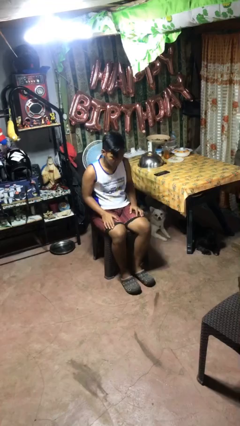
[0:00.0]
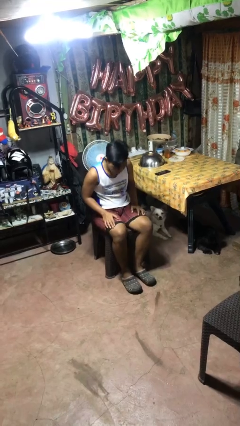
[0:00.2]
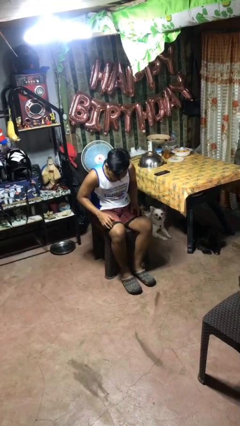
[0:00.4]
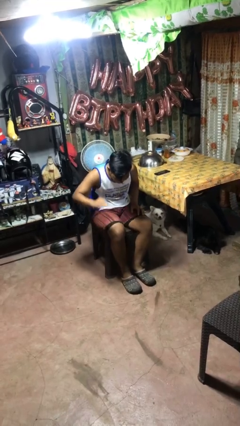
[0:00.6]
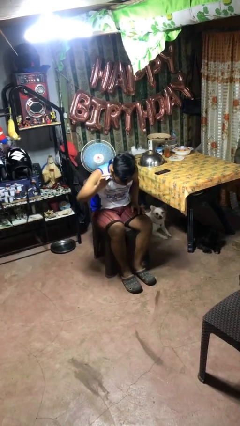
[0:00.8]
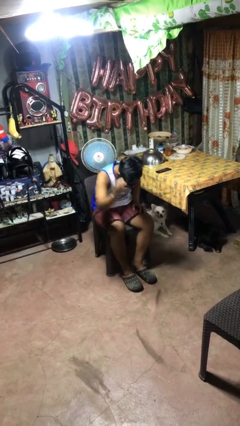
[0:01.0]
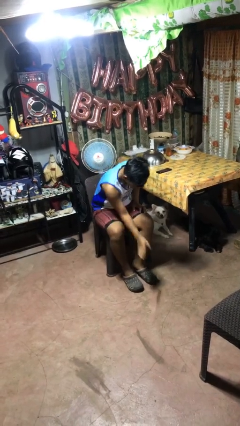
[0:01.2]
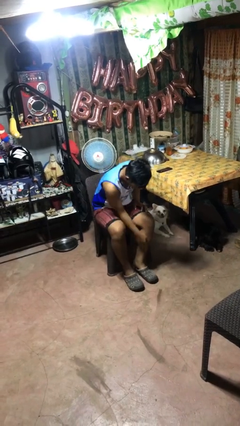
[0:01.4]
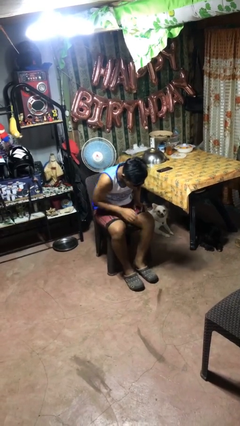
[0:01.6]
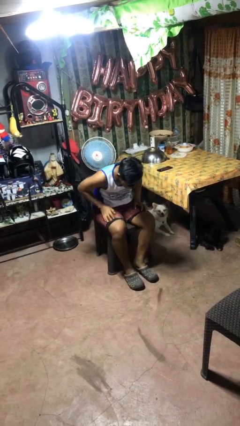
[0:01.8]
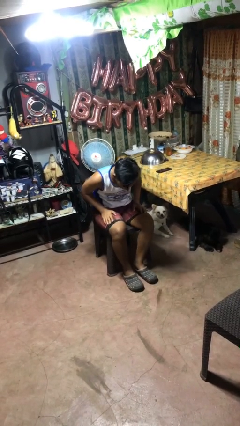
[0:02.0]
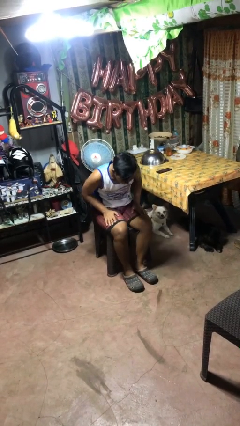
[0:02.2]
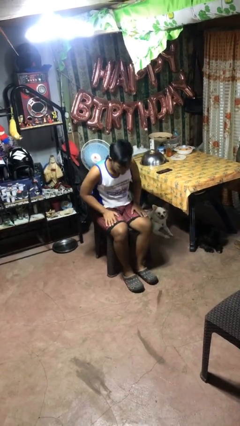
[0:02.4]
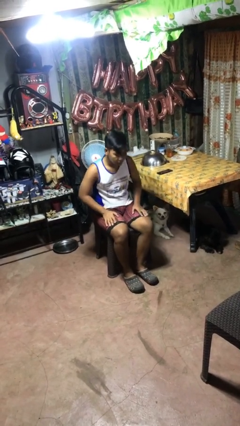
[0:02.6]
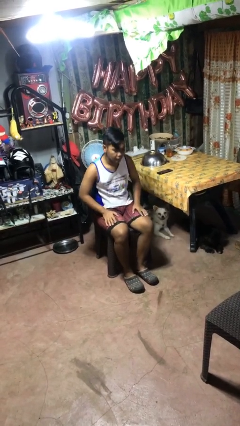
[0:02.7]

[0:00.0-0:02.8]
person swats bug

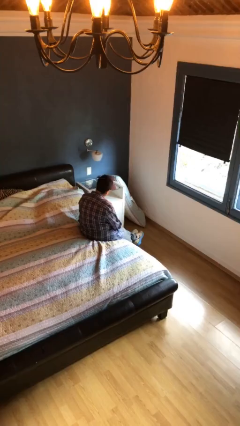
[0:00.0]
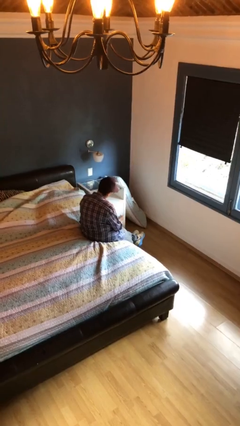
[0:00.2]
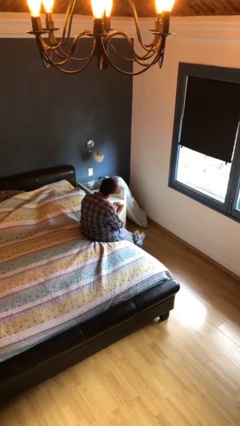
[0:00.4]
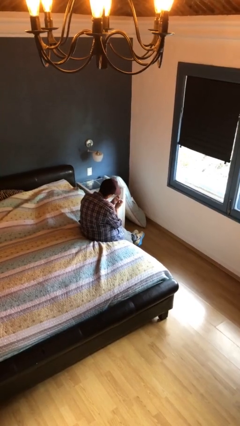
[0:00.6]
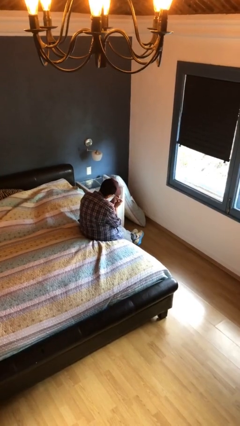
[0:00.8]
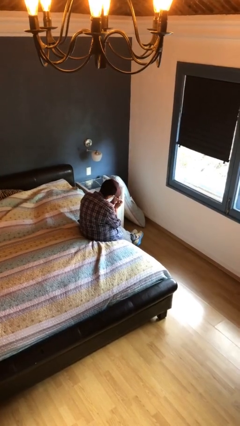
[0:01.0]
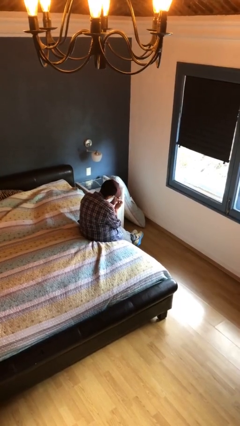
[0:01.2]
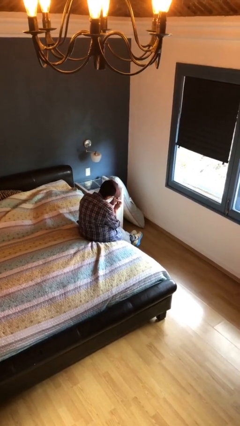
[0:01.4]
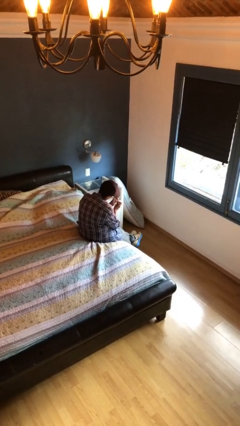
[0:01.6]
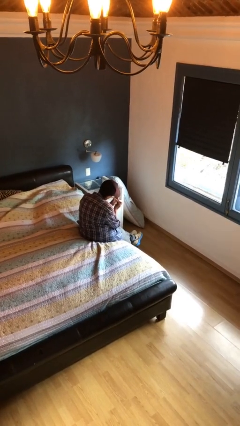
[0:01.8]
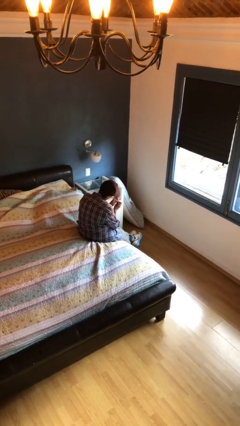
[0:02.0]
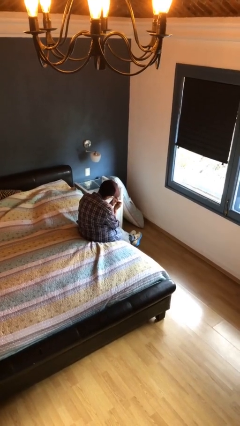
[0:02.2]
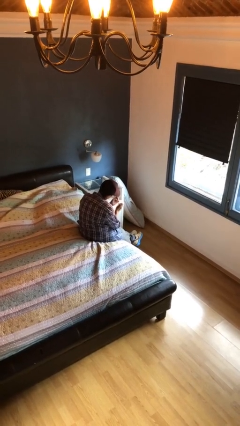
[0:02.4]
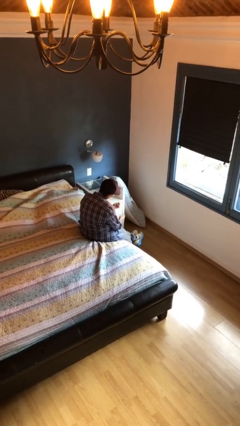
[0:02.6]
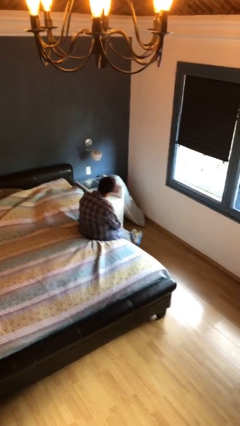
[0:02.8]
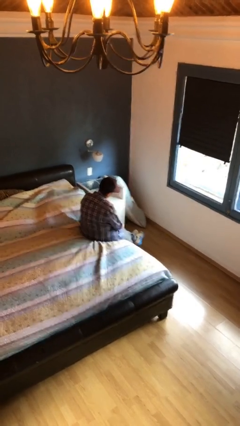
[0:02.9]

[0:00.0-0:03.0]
person clips fingernails

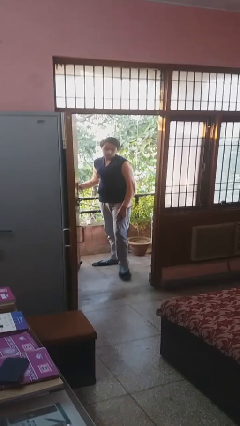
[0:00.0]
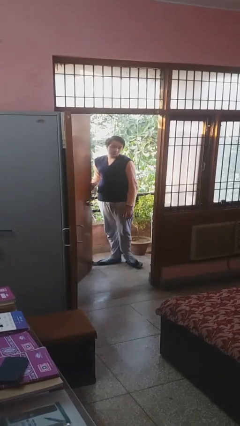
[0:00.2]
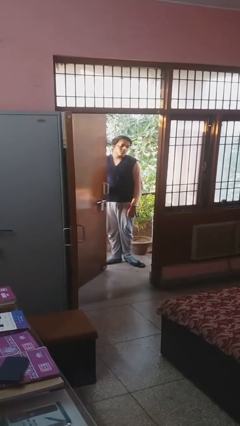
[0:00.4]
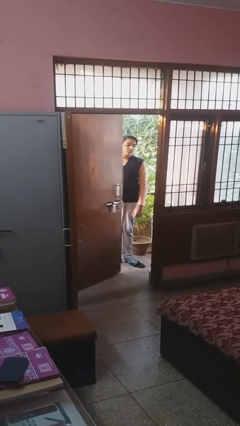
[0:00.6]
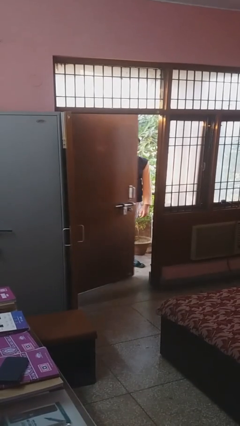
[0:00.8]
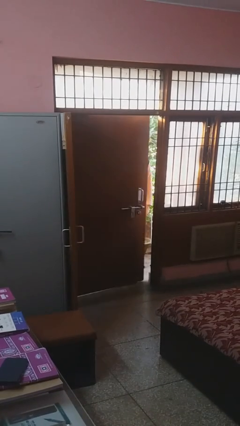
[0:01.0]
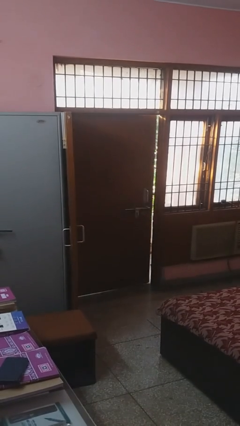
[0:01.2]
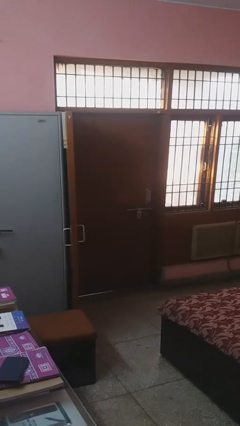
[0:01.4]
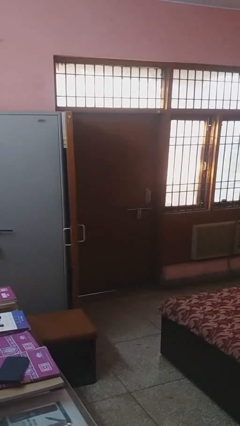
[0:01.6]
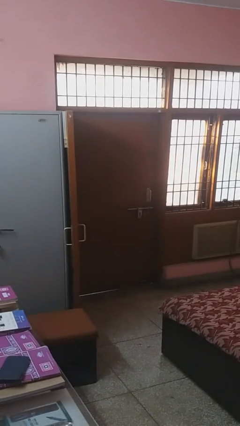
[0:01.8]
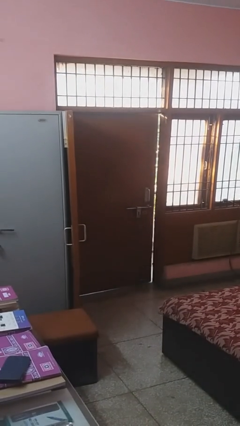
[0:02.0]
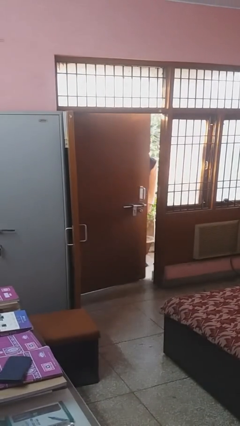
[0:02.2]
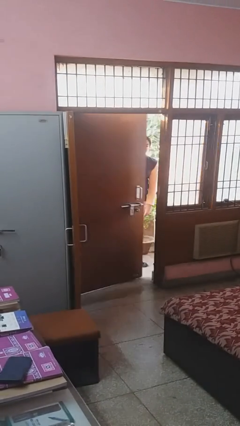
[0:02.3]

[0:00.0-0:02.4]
person closes facility door

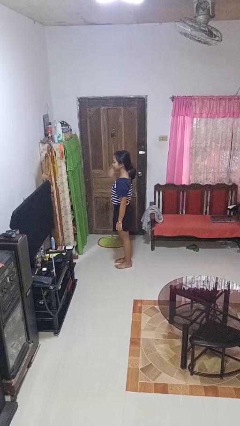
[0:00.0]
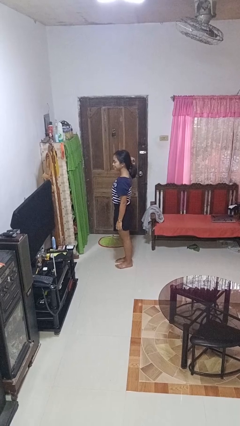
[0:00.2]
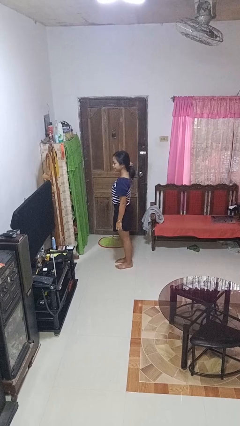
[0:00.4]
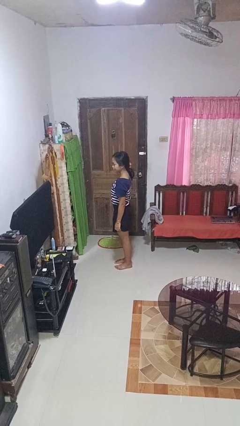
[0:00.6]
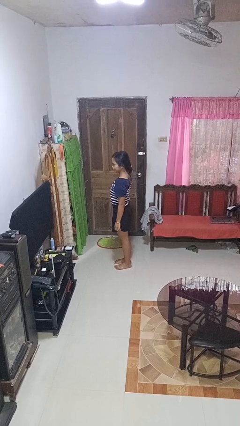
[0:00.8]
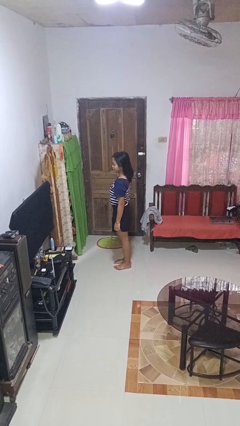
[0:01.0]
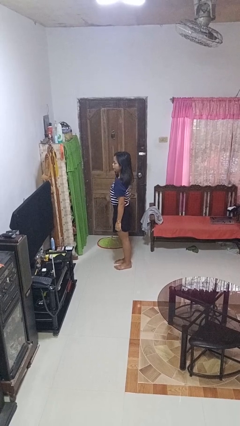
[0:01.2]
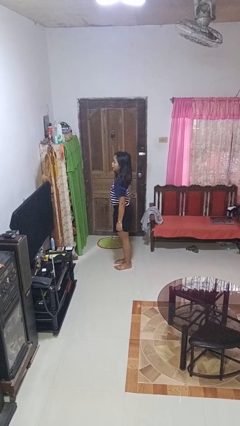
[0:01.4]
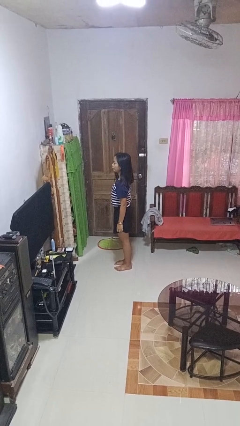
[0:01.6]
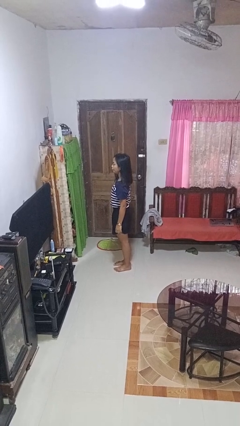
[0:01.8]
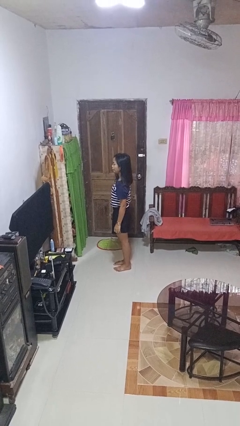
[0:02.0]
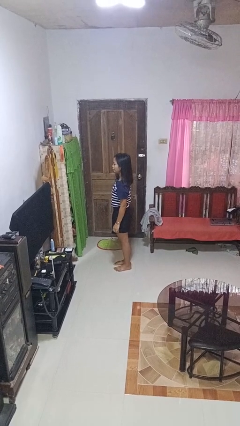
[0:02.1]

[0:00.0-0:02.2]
person takes off hairtie

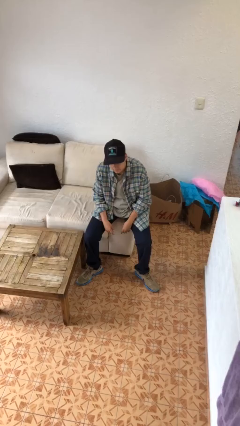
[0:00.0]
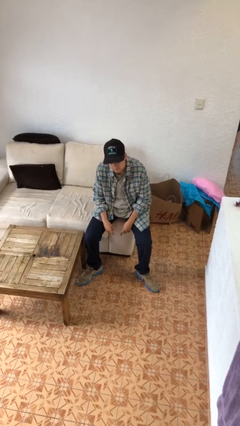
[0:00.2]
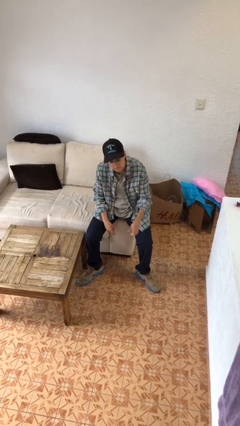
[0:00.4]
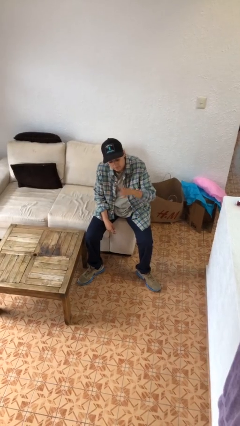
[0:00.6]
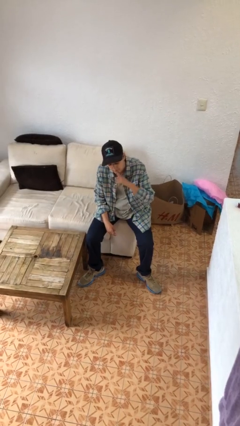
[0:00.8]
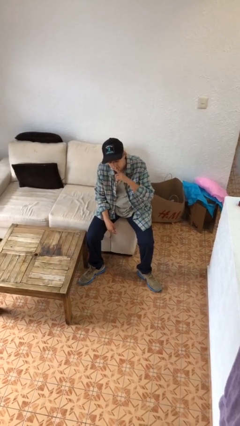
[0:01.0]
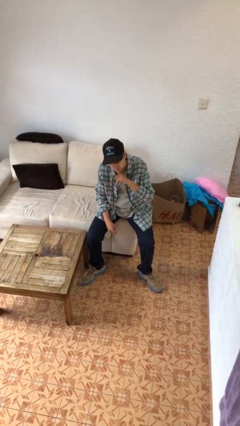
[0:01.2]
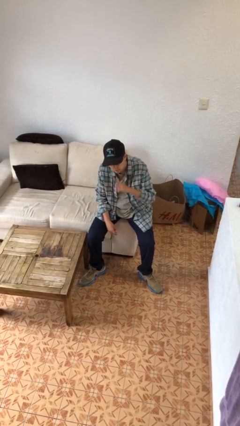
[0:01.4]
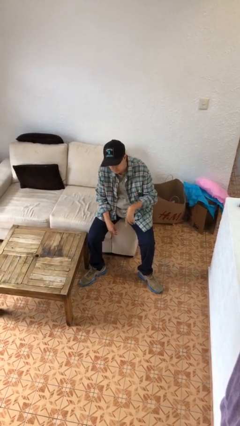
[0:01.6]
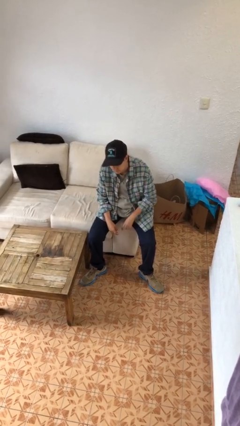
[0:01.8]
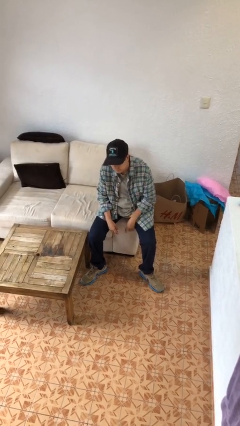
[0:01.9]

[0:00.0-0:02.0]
person gestures be quiet

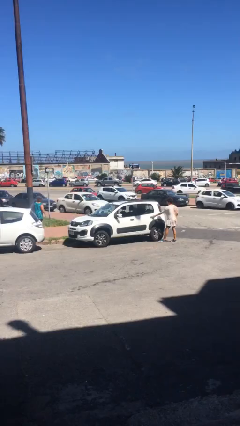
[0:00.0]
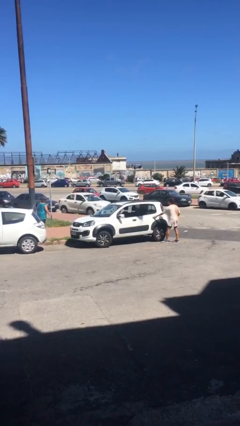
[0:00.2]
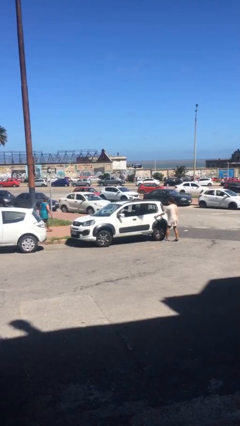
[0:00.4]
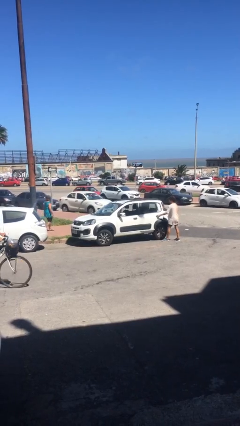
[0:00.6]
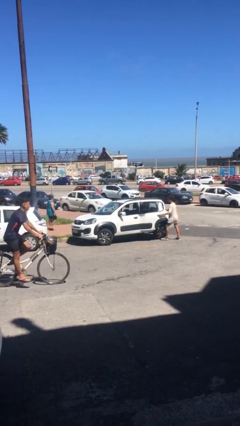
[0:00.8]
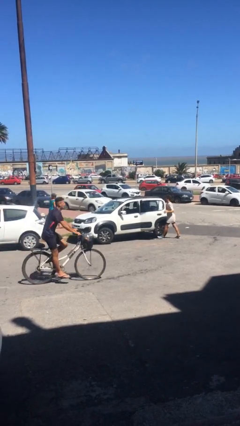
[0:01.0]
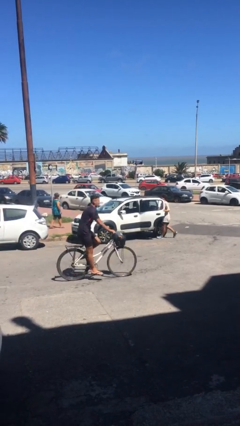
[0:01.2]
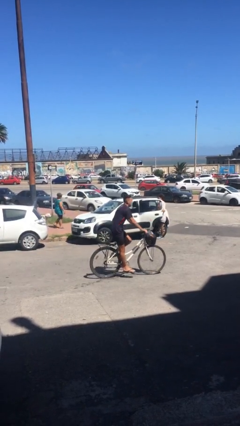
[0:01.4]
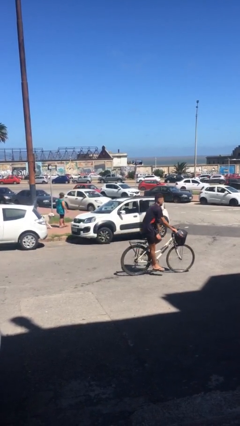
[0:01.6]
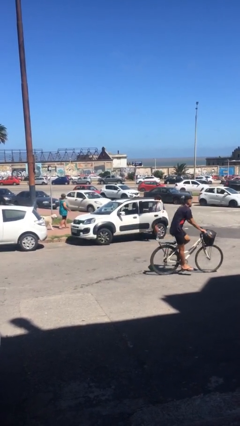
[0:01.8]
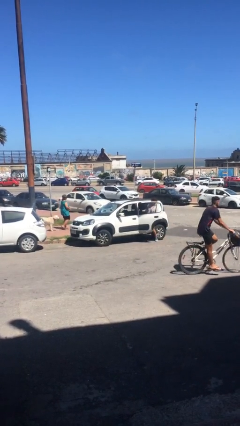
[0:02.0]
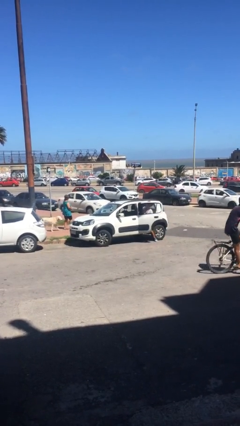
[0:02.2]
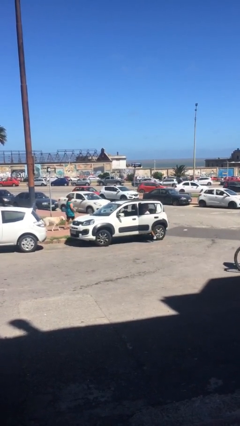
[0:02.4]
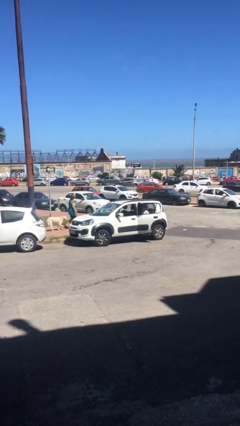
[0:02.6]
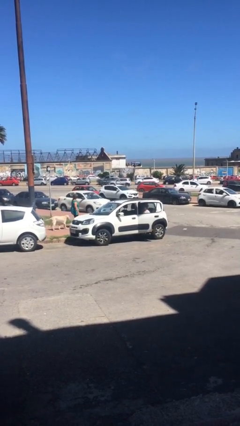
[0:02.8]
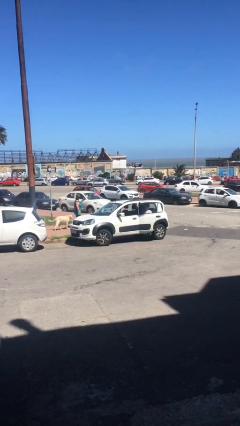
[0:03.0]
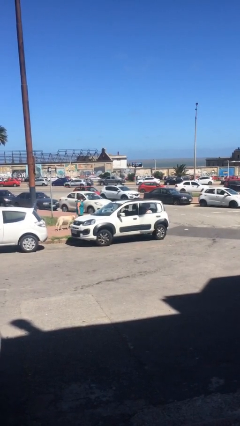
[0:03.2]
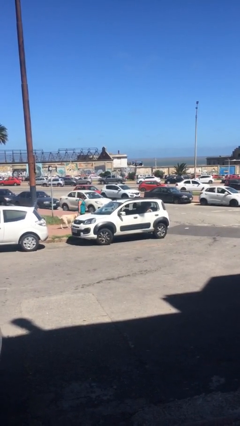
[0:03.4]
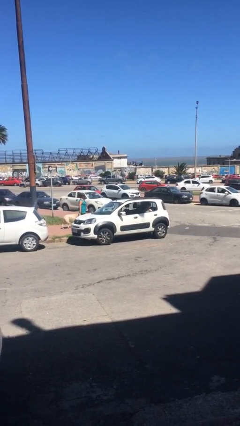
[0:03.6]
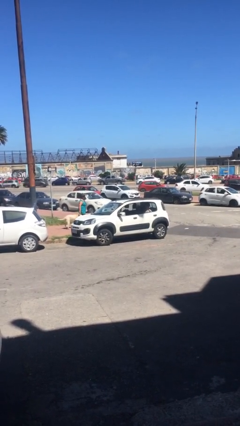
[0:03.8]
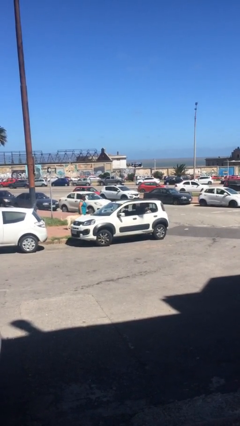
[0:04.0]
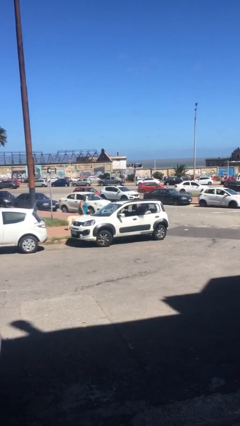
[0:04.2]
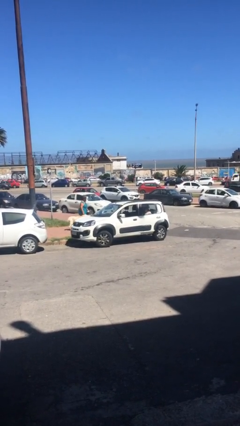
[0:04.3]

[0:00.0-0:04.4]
car picks up person
